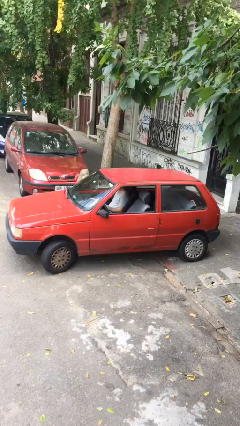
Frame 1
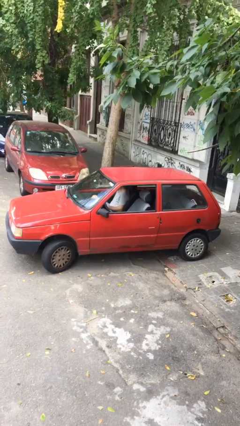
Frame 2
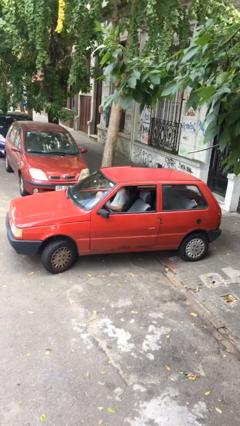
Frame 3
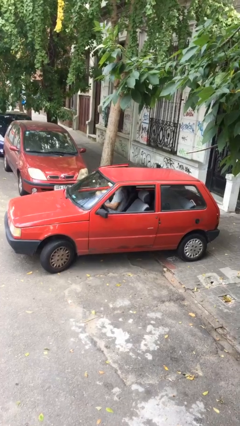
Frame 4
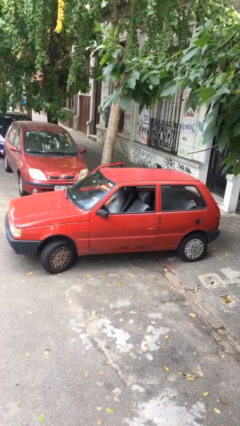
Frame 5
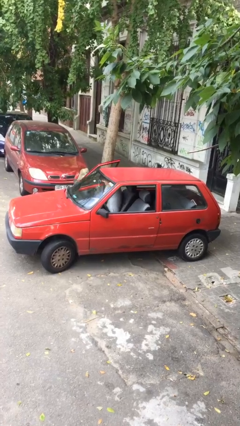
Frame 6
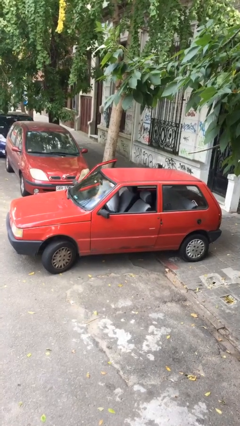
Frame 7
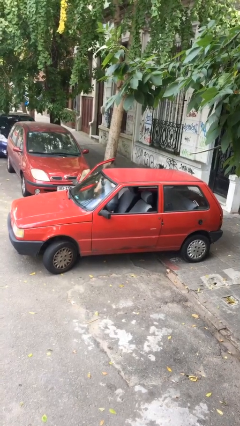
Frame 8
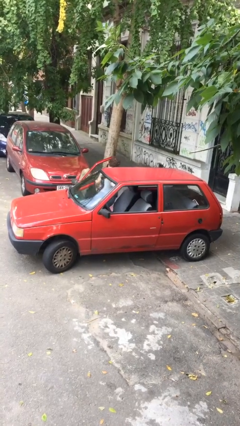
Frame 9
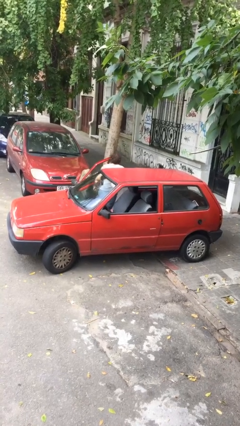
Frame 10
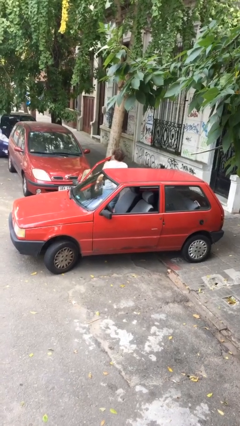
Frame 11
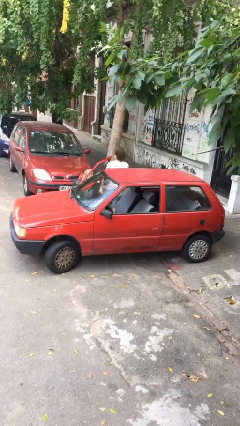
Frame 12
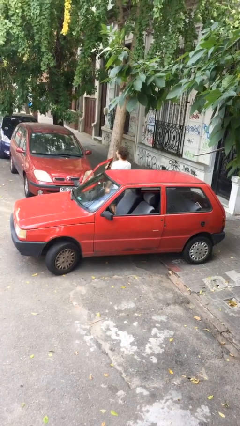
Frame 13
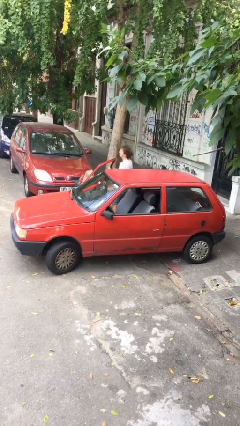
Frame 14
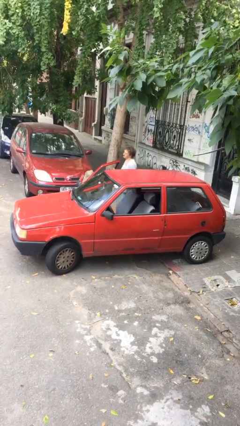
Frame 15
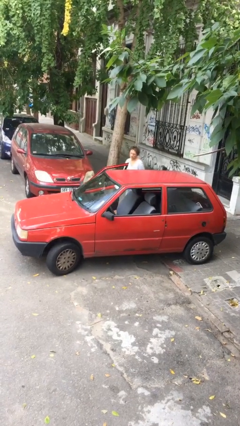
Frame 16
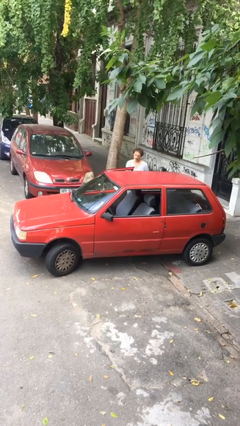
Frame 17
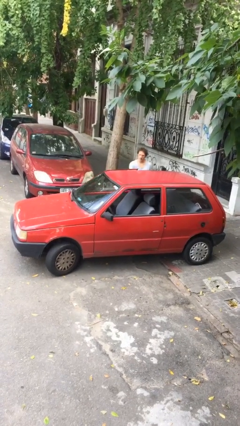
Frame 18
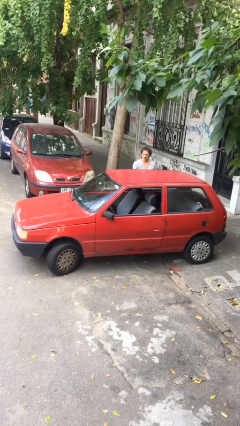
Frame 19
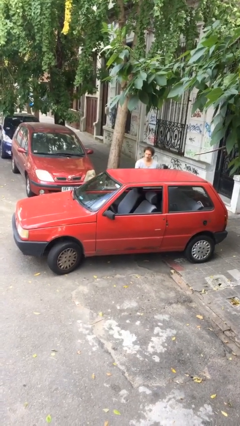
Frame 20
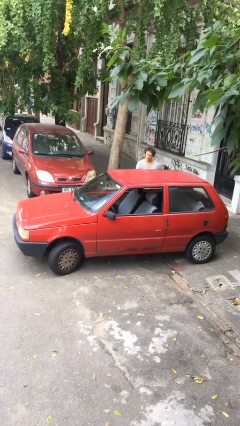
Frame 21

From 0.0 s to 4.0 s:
car drops off person

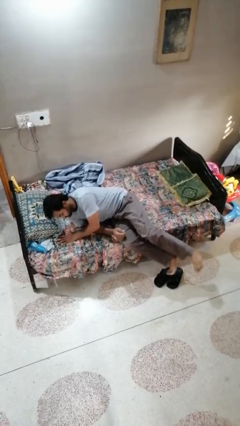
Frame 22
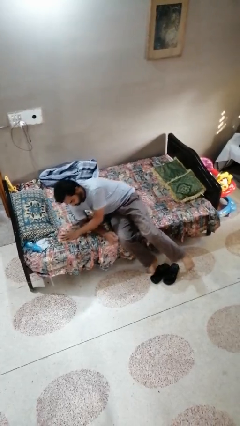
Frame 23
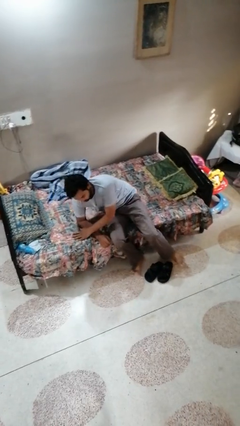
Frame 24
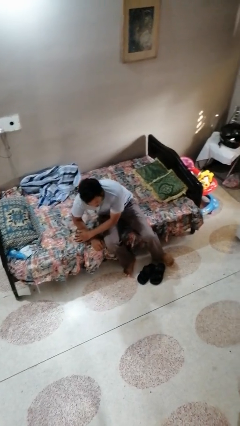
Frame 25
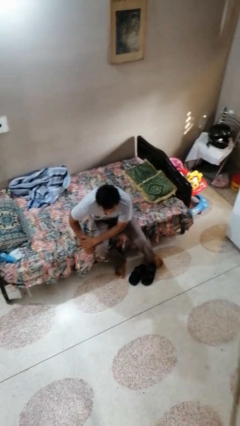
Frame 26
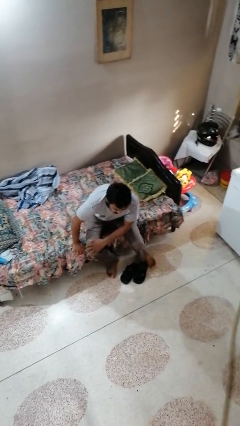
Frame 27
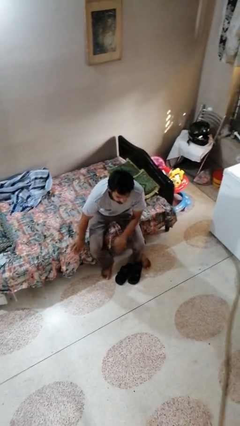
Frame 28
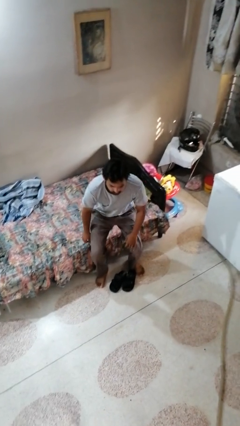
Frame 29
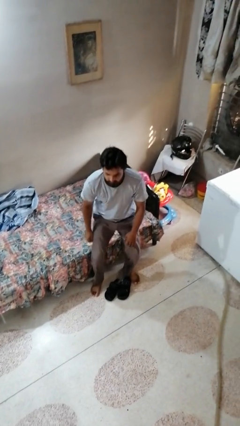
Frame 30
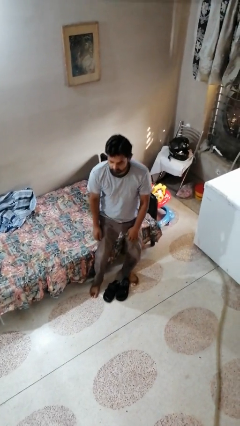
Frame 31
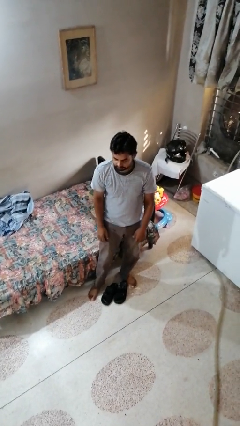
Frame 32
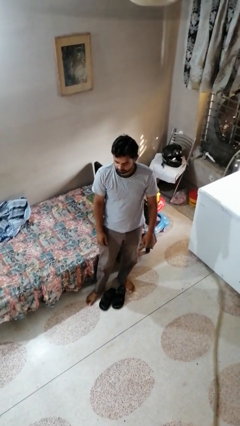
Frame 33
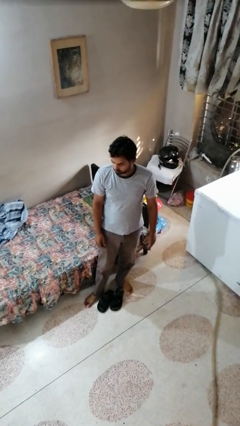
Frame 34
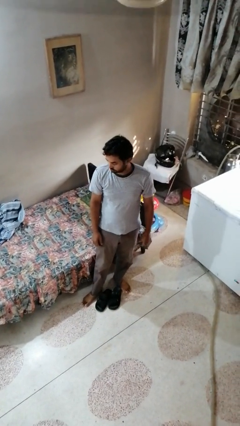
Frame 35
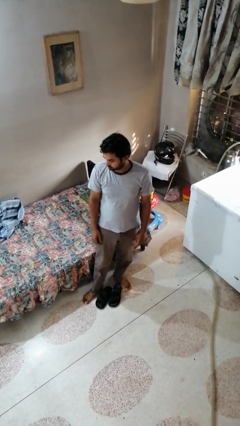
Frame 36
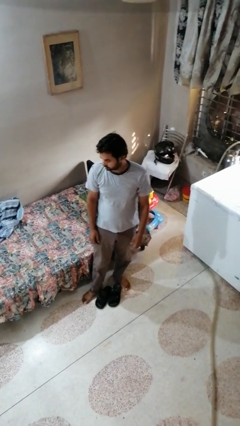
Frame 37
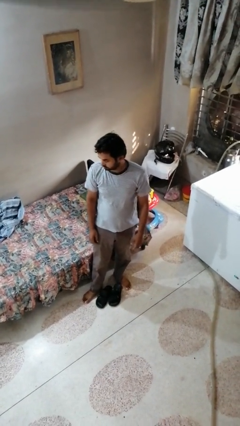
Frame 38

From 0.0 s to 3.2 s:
person stands up

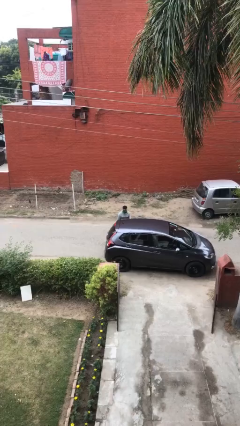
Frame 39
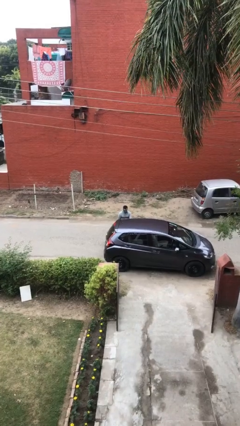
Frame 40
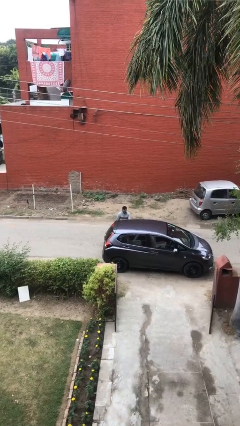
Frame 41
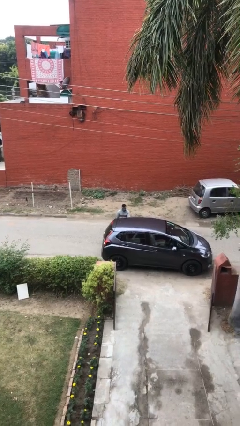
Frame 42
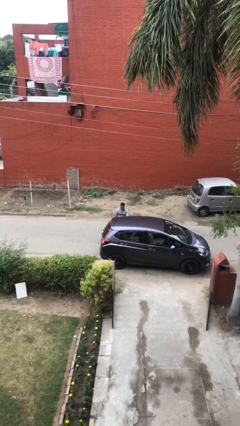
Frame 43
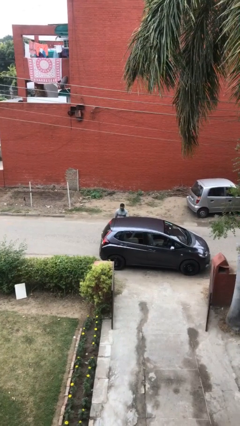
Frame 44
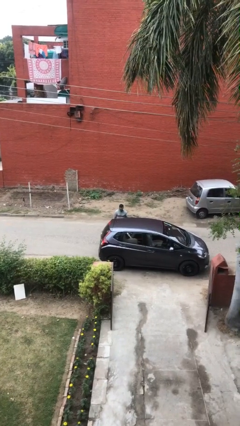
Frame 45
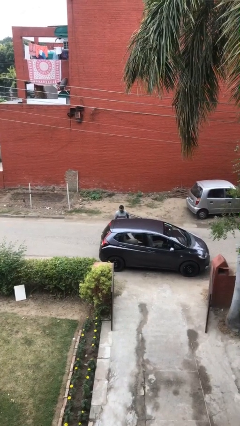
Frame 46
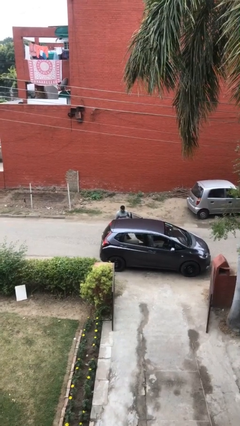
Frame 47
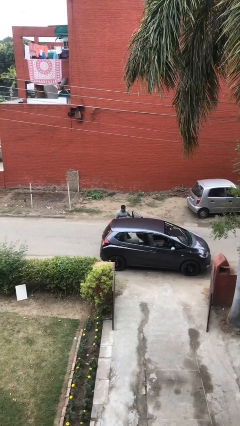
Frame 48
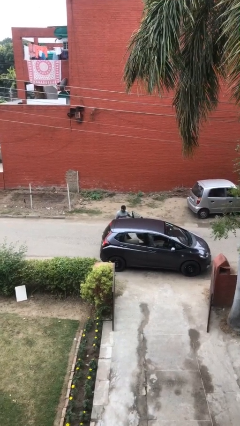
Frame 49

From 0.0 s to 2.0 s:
person opens car door

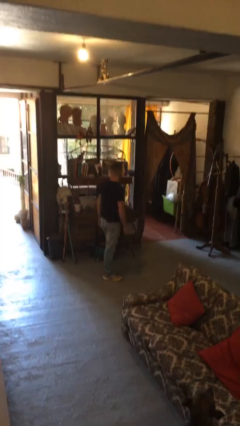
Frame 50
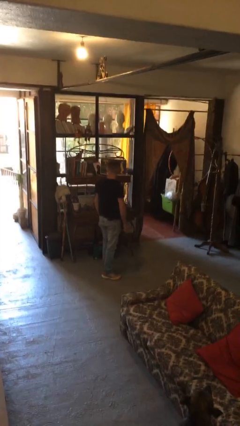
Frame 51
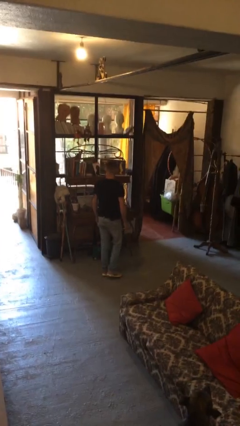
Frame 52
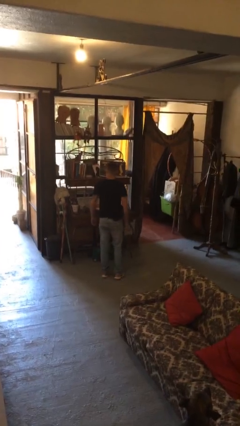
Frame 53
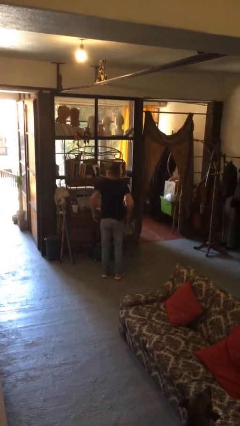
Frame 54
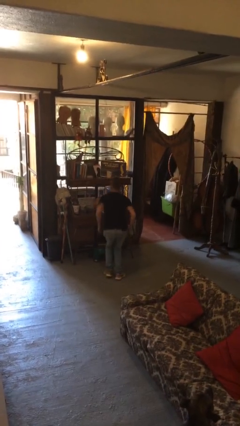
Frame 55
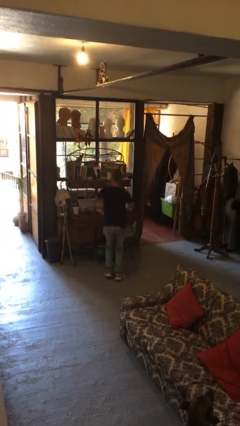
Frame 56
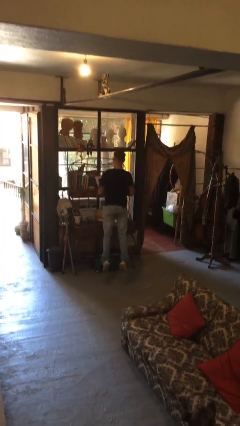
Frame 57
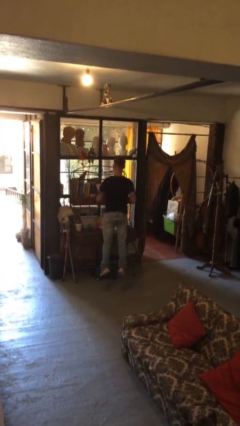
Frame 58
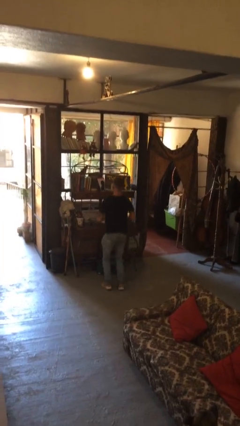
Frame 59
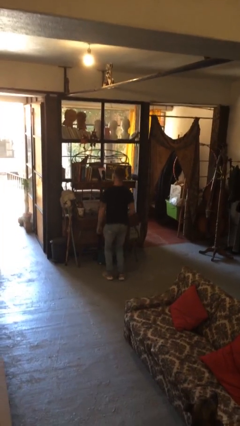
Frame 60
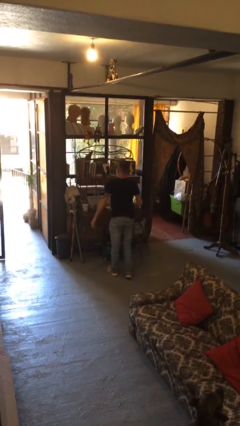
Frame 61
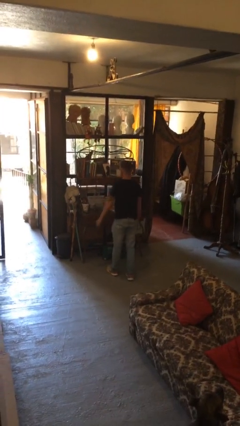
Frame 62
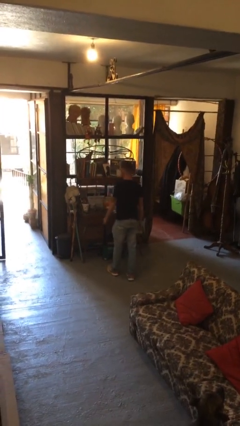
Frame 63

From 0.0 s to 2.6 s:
person jumps

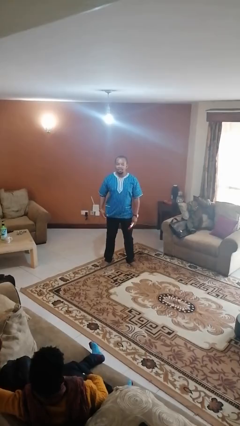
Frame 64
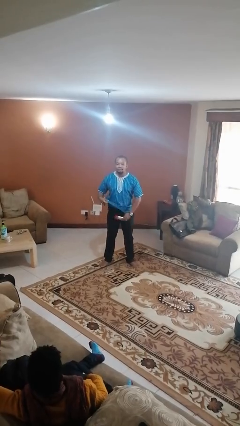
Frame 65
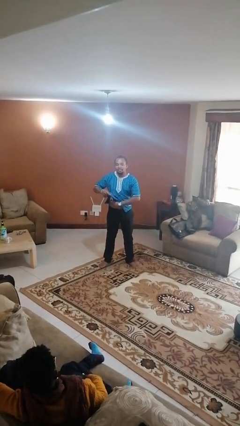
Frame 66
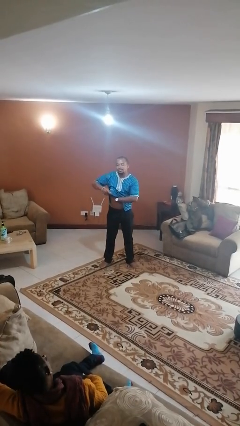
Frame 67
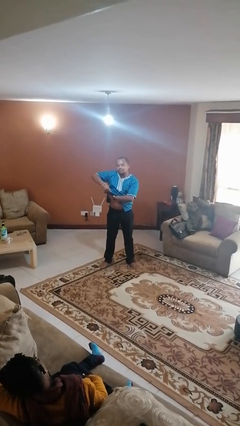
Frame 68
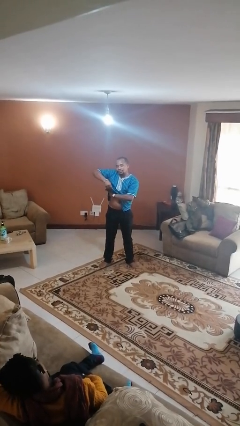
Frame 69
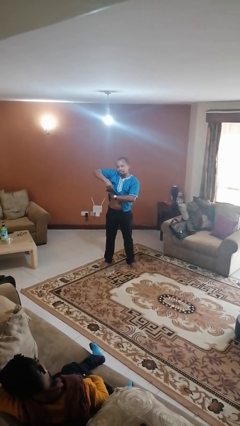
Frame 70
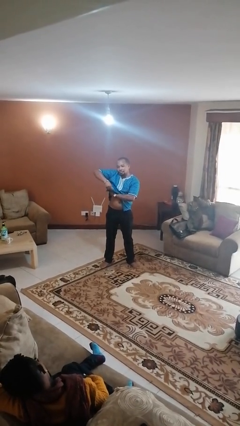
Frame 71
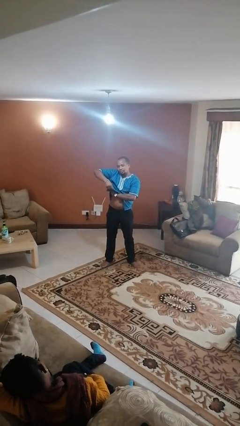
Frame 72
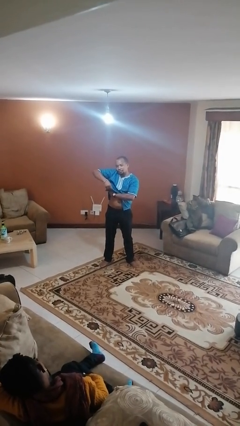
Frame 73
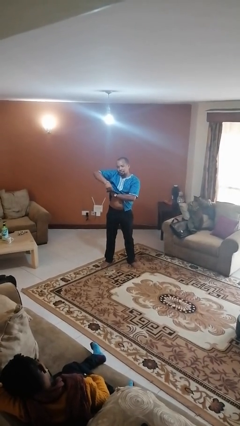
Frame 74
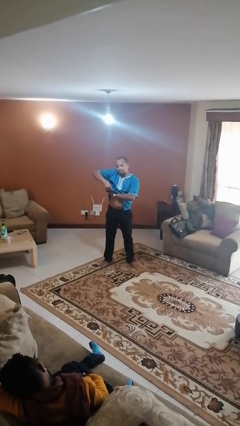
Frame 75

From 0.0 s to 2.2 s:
person applies deodorant

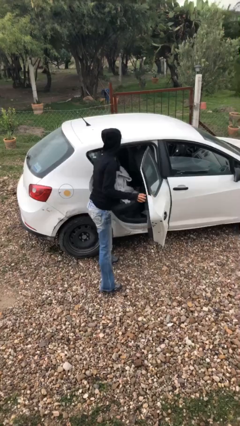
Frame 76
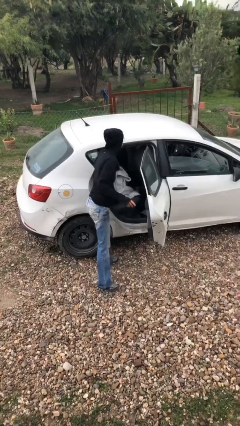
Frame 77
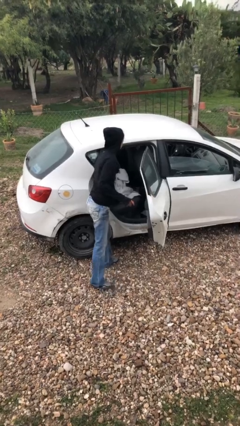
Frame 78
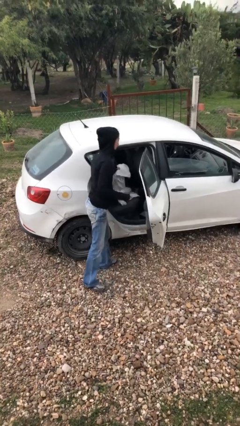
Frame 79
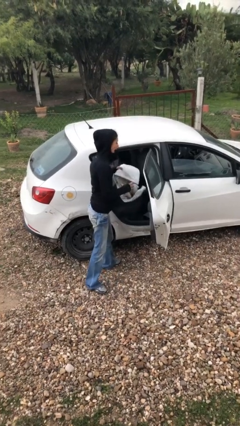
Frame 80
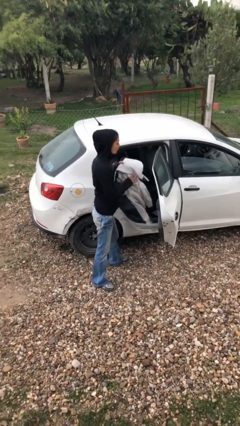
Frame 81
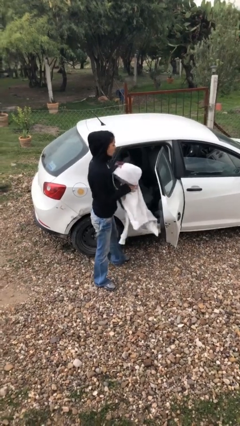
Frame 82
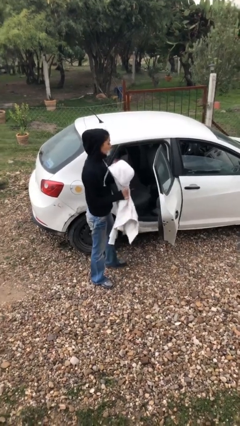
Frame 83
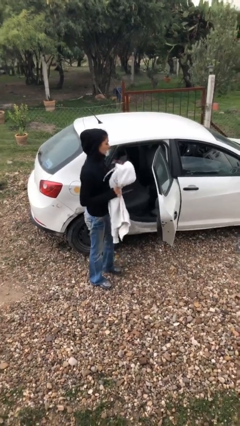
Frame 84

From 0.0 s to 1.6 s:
person unloads car

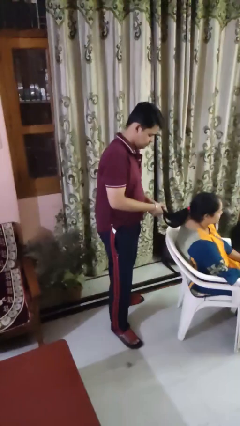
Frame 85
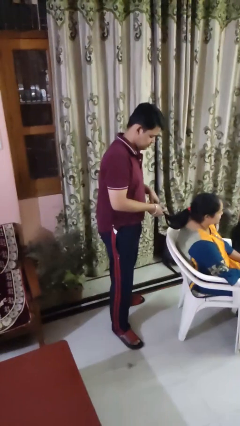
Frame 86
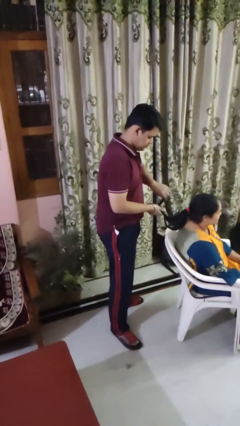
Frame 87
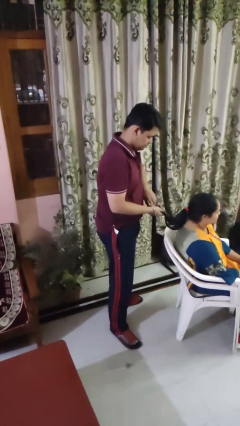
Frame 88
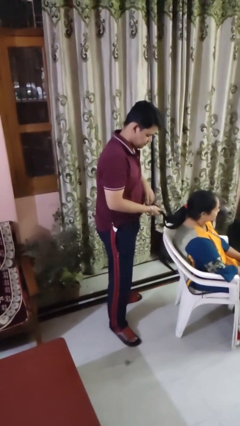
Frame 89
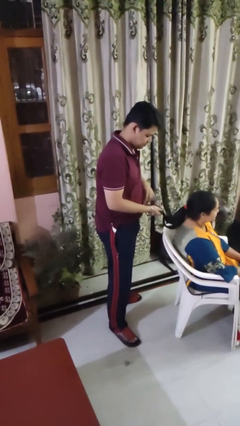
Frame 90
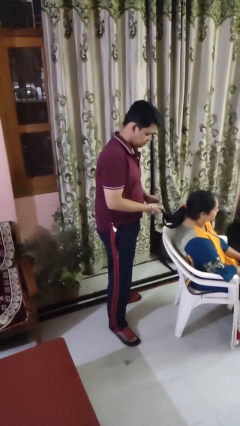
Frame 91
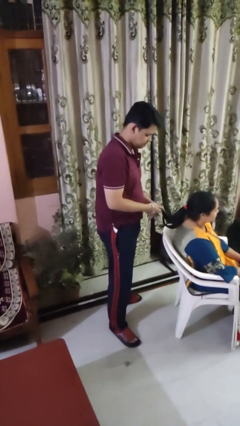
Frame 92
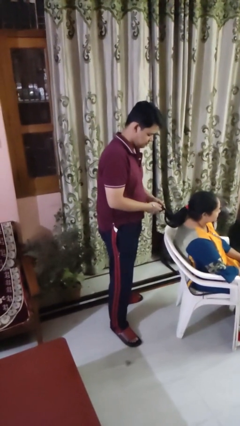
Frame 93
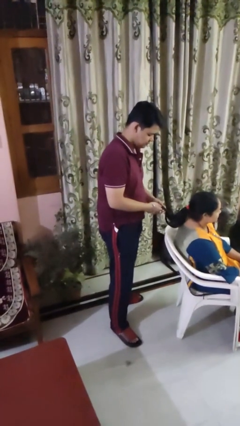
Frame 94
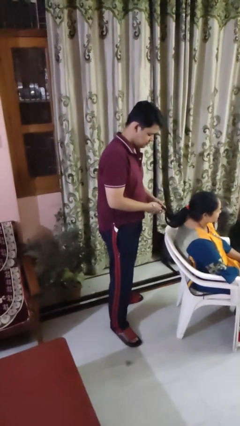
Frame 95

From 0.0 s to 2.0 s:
person braids hair of person
